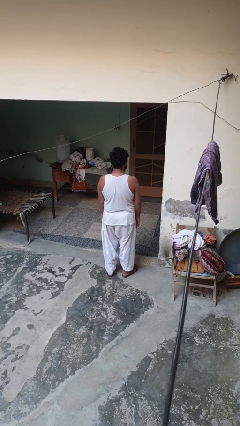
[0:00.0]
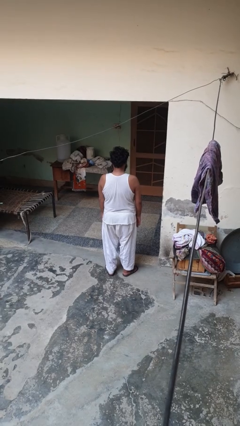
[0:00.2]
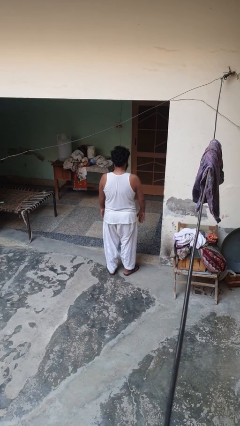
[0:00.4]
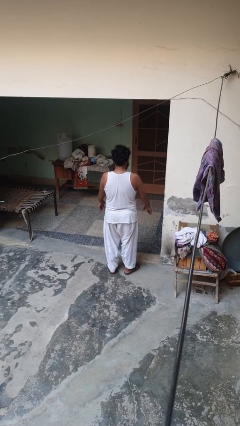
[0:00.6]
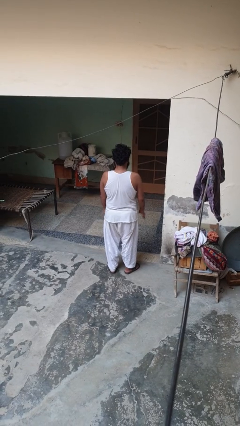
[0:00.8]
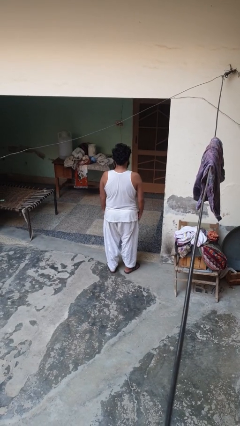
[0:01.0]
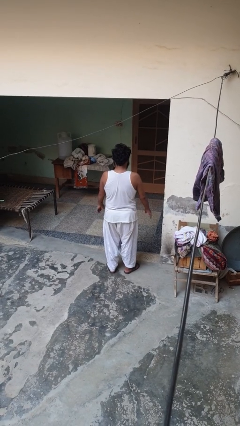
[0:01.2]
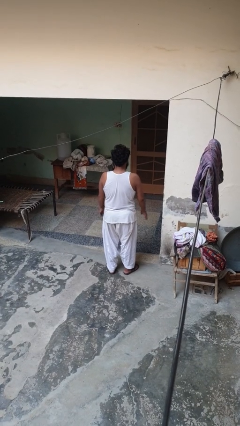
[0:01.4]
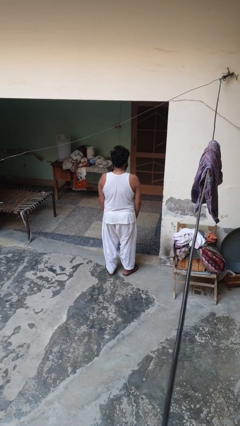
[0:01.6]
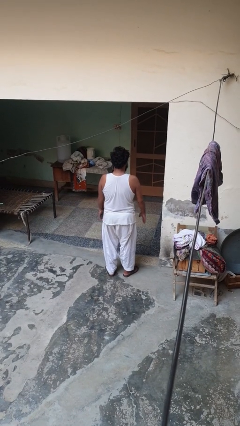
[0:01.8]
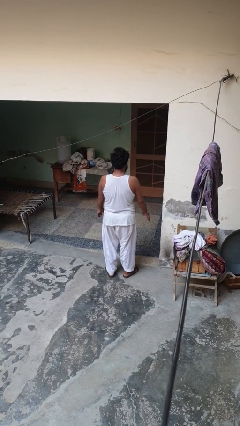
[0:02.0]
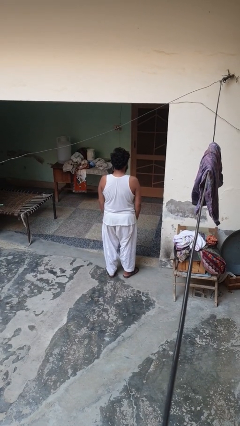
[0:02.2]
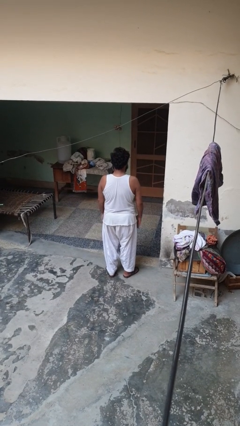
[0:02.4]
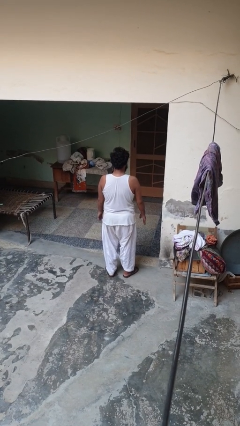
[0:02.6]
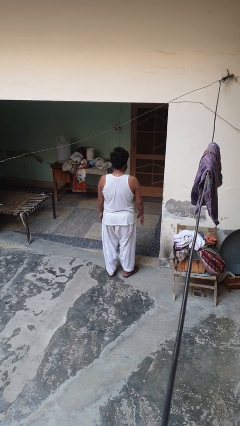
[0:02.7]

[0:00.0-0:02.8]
person slaps hands on thighs

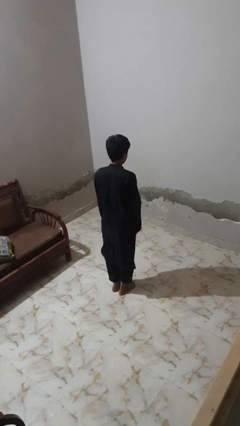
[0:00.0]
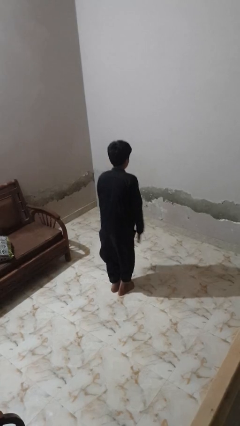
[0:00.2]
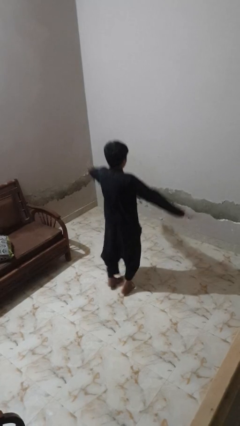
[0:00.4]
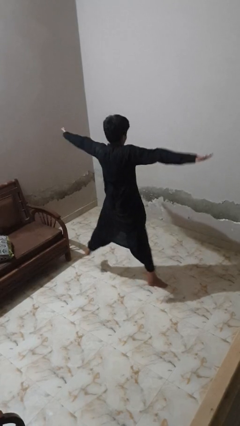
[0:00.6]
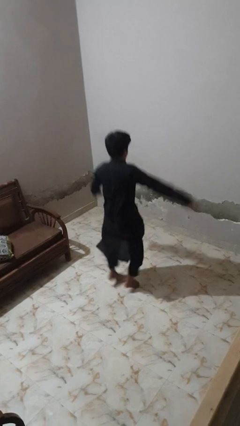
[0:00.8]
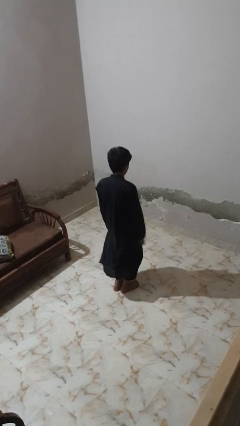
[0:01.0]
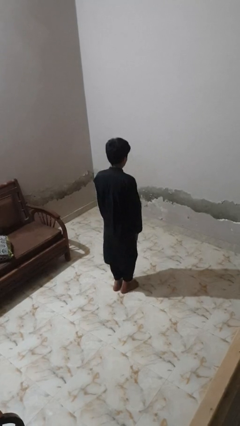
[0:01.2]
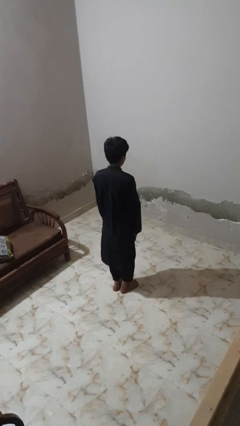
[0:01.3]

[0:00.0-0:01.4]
person exercises with jumping jacks

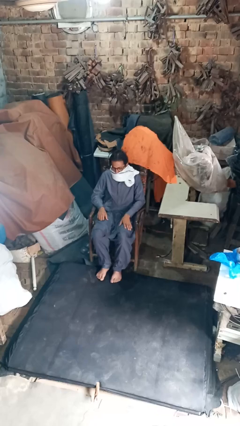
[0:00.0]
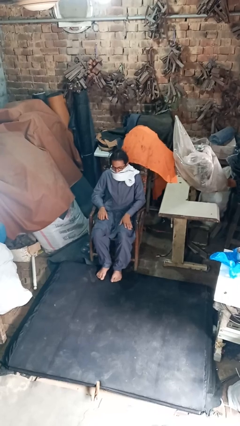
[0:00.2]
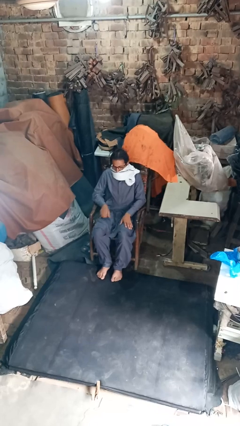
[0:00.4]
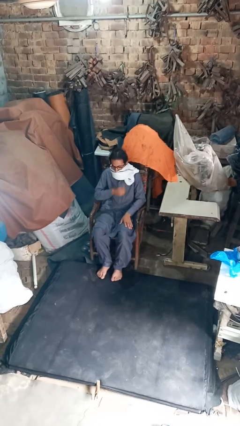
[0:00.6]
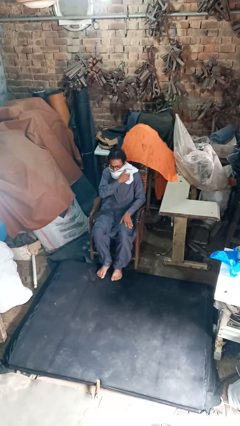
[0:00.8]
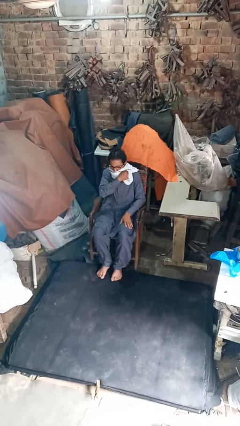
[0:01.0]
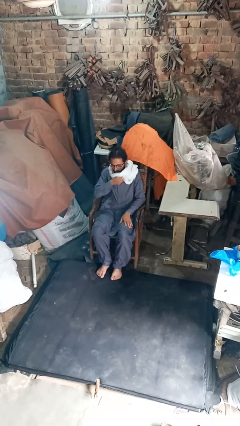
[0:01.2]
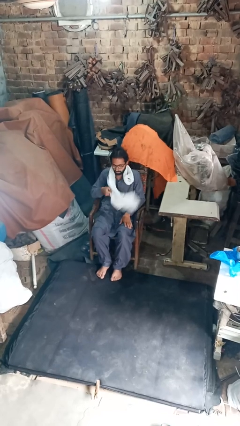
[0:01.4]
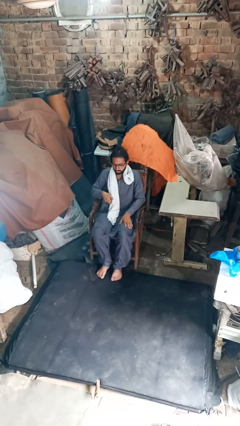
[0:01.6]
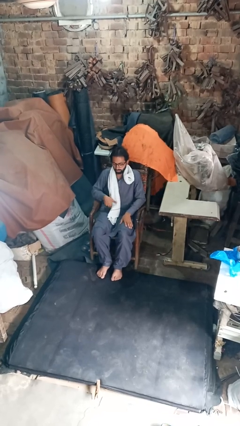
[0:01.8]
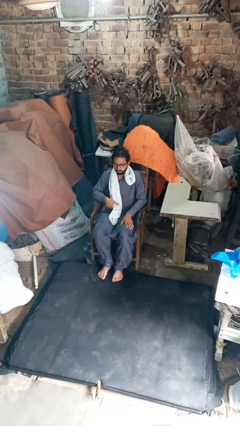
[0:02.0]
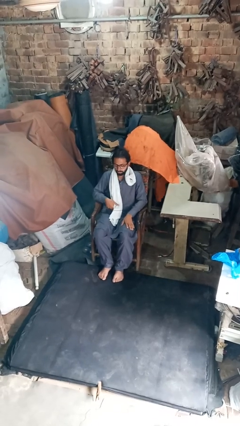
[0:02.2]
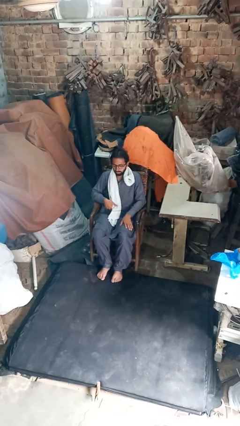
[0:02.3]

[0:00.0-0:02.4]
person takes off scarf

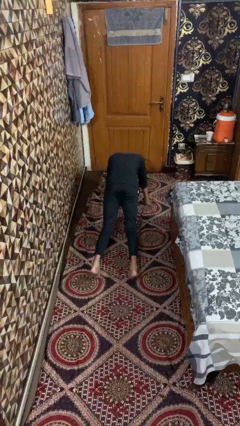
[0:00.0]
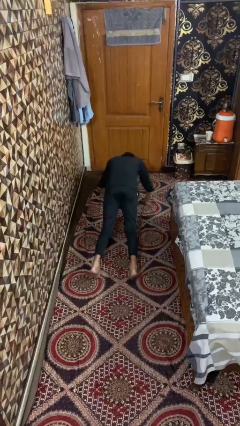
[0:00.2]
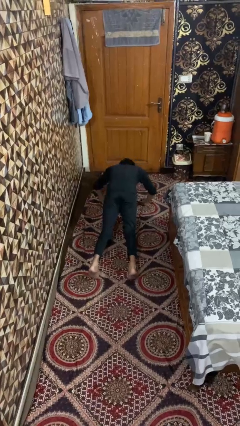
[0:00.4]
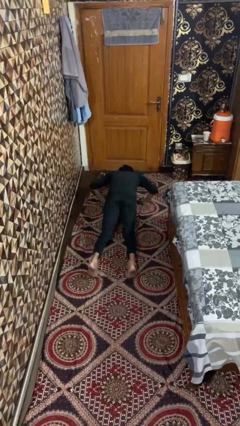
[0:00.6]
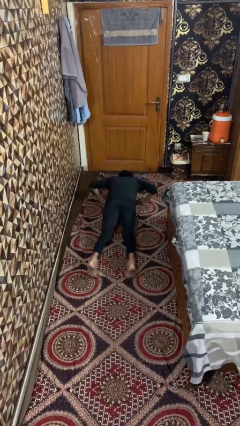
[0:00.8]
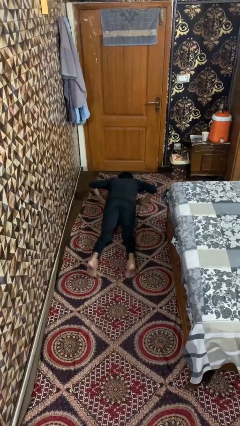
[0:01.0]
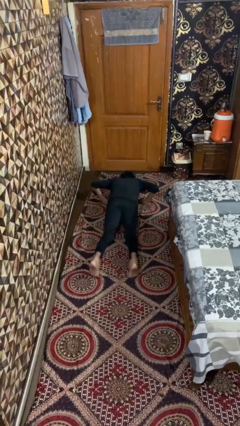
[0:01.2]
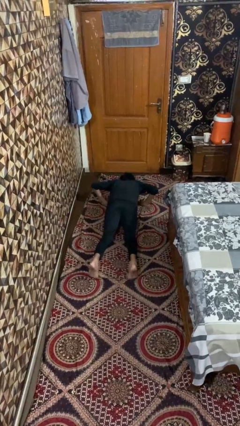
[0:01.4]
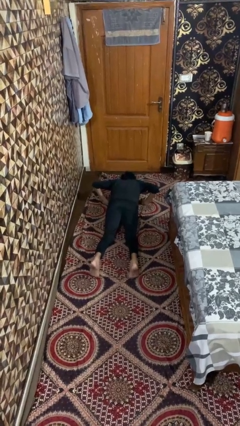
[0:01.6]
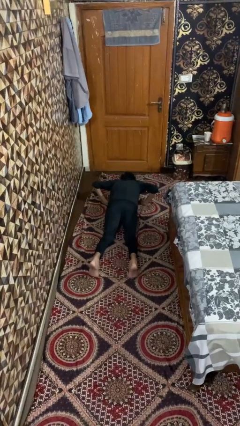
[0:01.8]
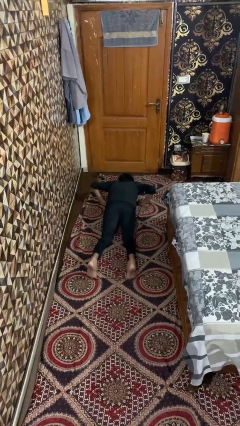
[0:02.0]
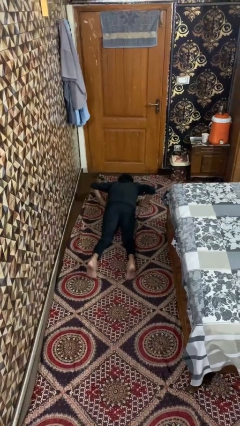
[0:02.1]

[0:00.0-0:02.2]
person exercises with pushup

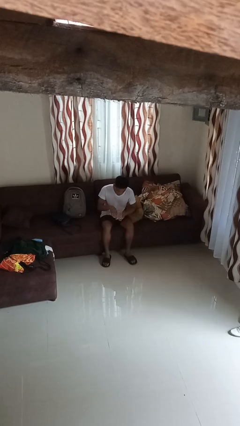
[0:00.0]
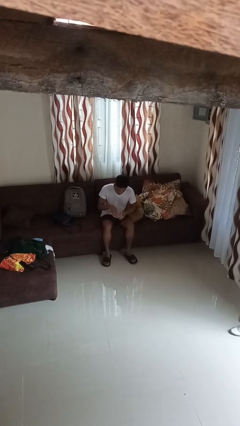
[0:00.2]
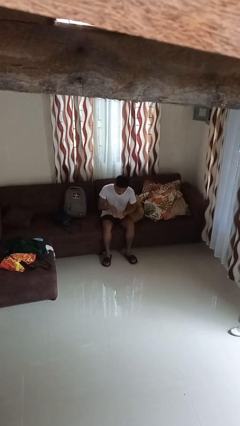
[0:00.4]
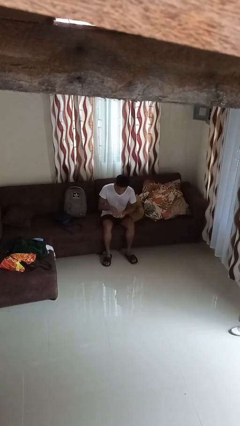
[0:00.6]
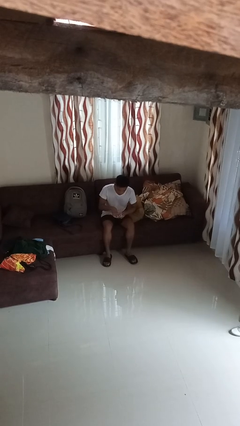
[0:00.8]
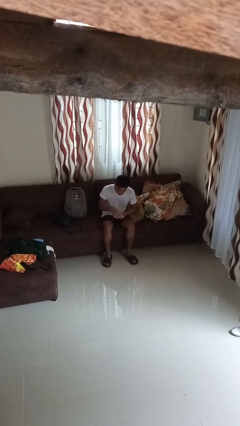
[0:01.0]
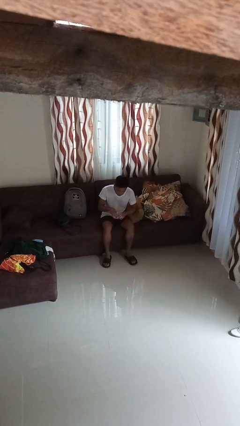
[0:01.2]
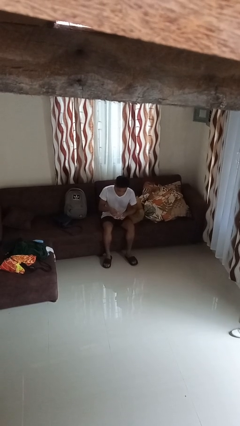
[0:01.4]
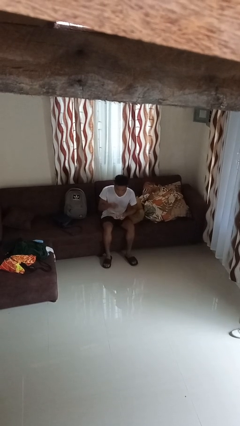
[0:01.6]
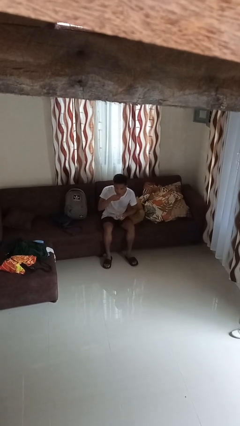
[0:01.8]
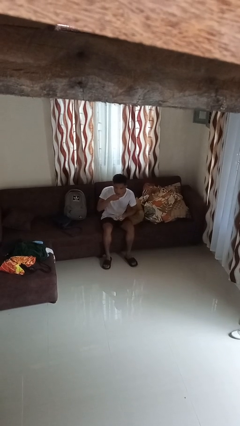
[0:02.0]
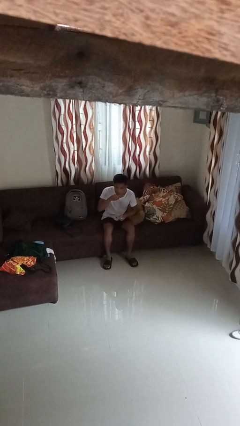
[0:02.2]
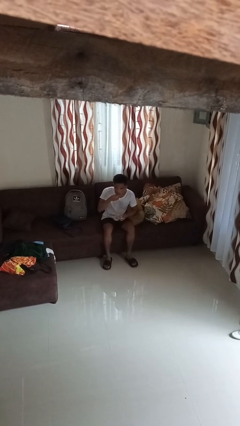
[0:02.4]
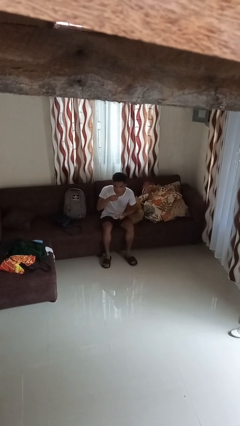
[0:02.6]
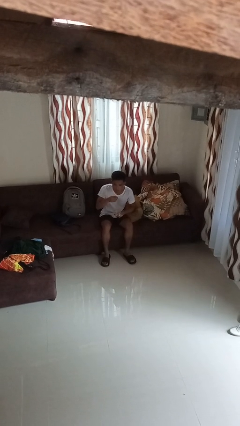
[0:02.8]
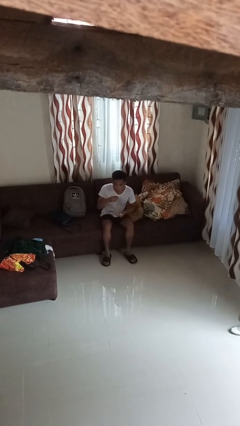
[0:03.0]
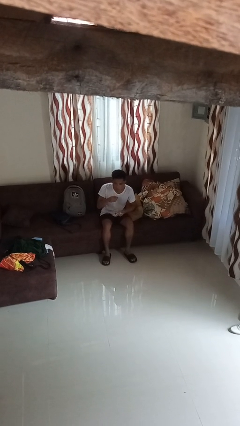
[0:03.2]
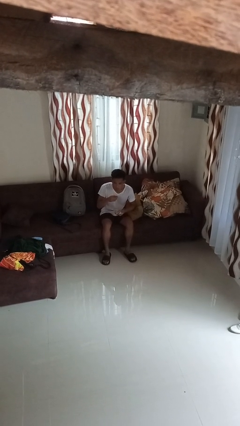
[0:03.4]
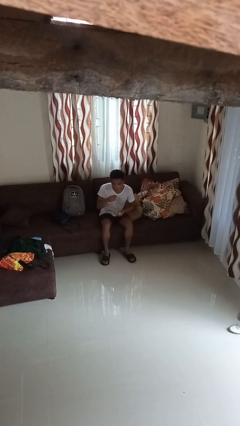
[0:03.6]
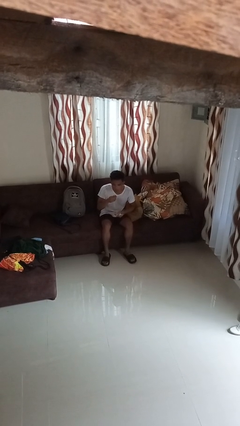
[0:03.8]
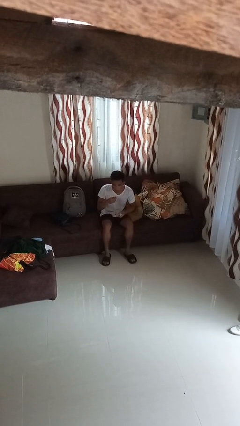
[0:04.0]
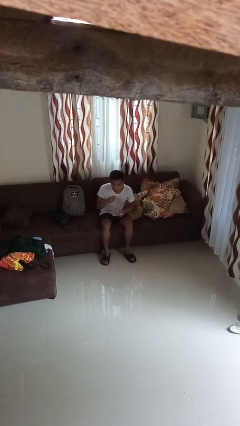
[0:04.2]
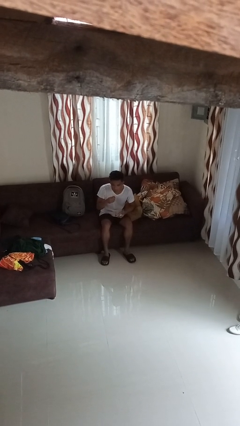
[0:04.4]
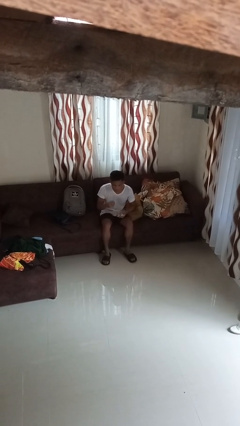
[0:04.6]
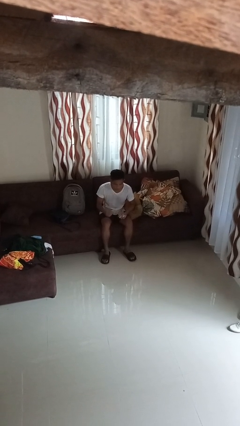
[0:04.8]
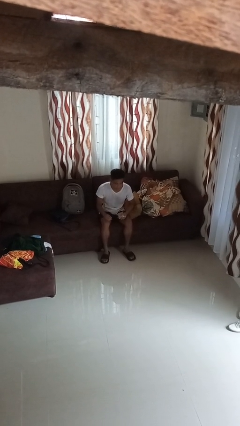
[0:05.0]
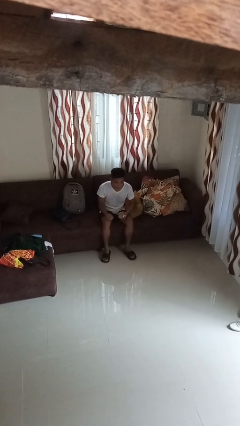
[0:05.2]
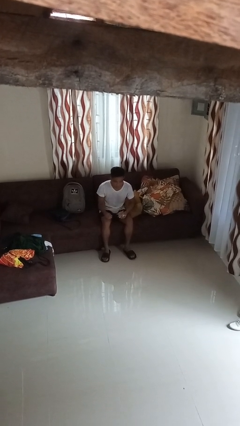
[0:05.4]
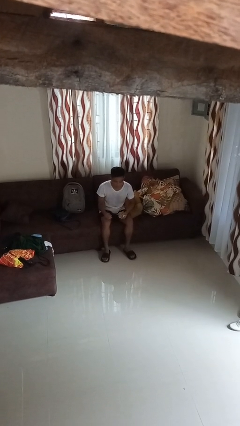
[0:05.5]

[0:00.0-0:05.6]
person eats snack from bag

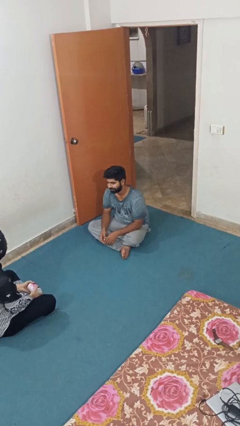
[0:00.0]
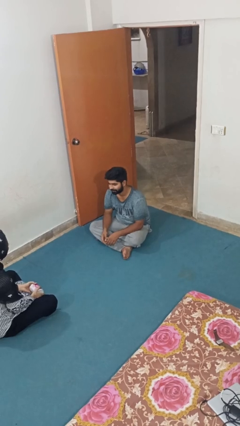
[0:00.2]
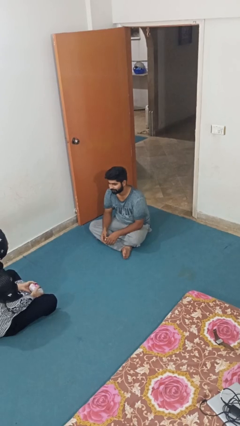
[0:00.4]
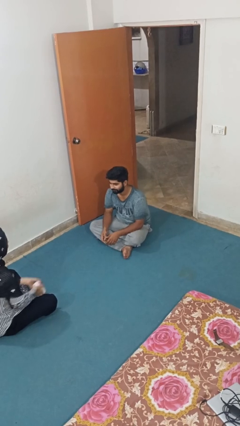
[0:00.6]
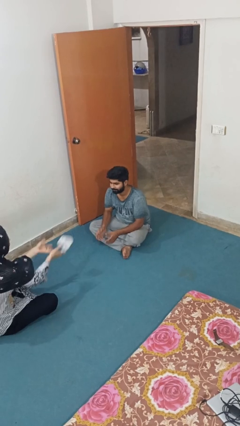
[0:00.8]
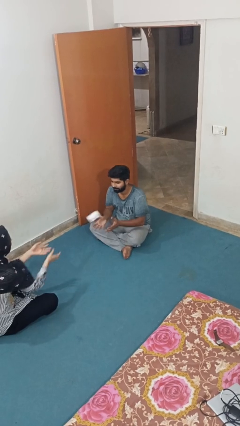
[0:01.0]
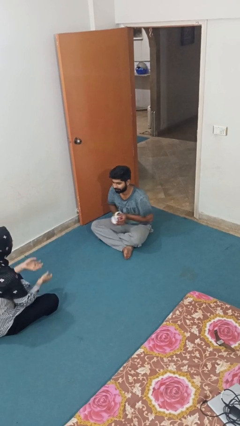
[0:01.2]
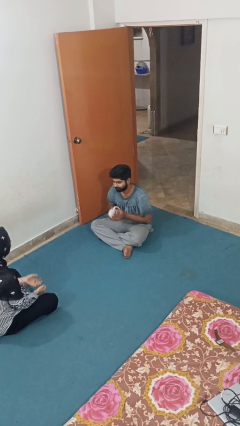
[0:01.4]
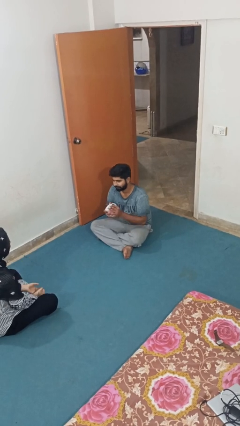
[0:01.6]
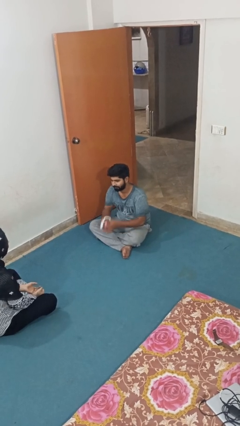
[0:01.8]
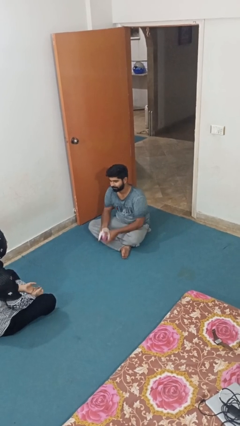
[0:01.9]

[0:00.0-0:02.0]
person catches object from person

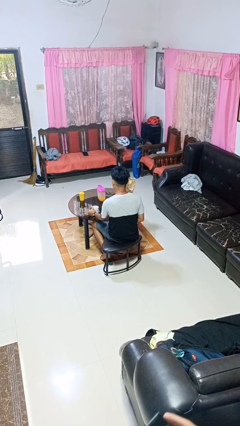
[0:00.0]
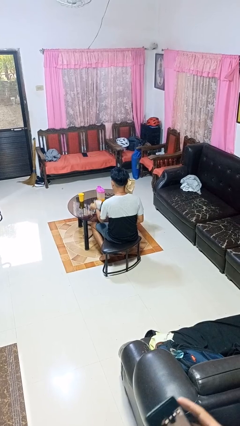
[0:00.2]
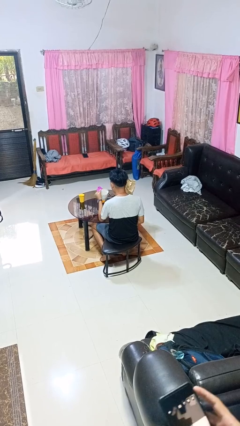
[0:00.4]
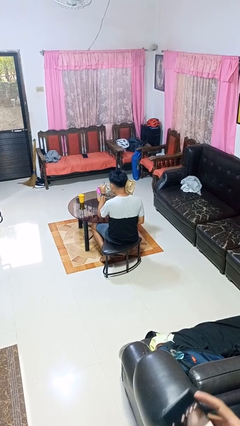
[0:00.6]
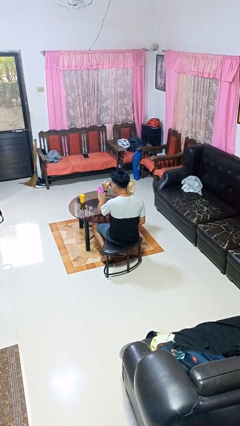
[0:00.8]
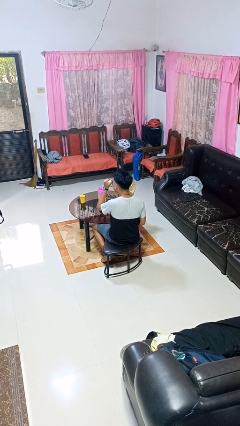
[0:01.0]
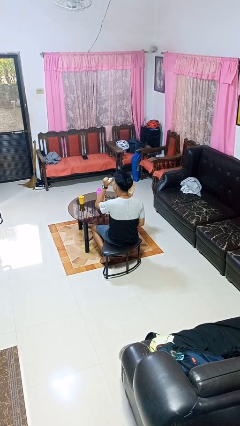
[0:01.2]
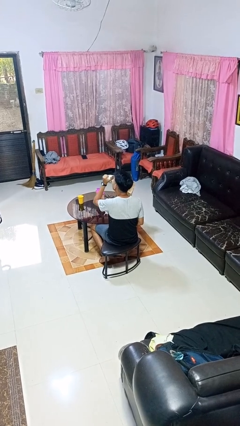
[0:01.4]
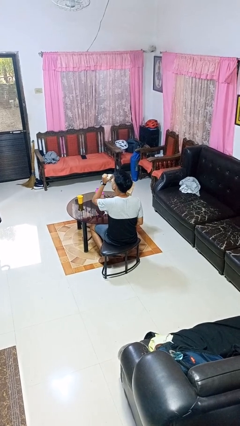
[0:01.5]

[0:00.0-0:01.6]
person drinks from mug
